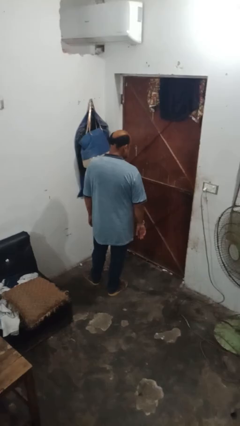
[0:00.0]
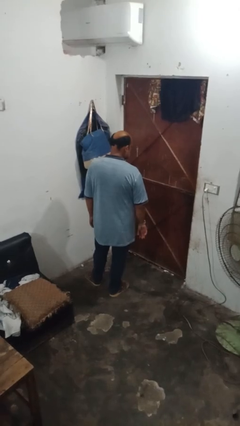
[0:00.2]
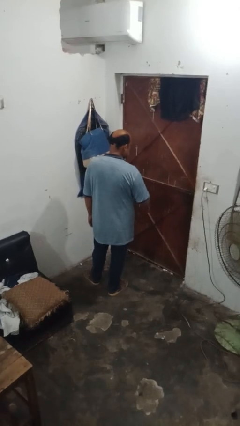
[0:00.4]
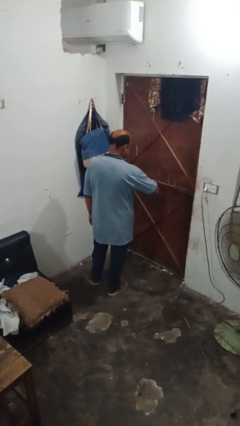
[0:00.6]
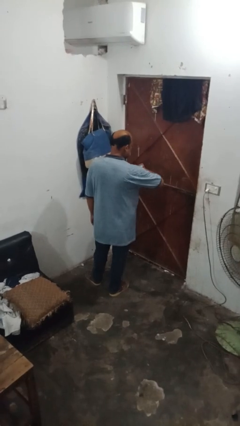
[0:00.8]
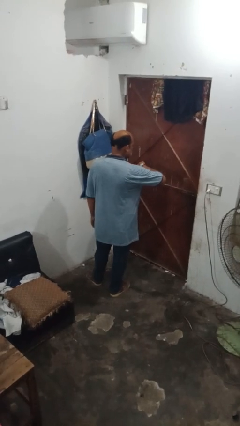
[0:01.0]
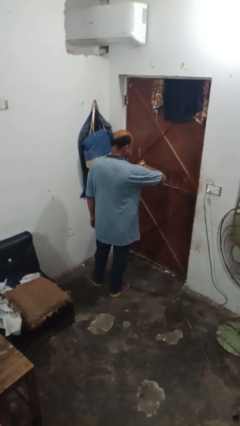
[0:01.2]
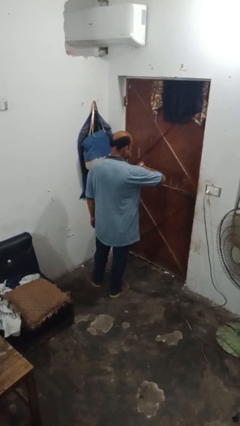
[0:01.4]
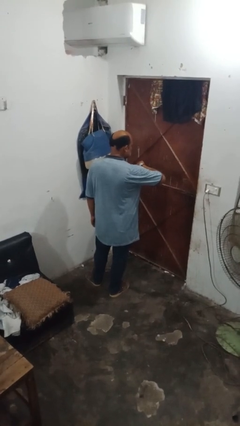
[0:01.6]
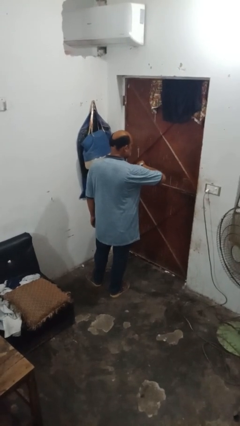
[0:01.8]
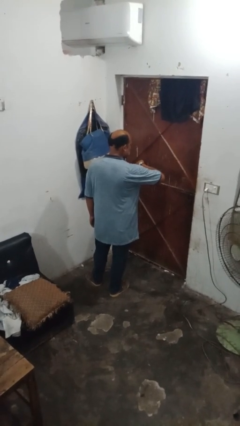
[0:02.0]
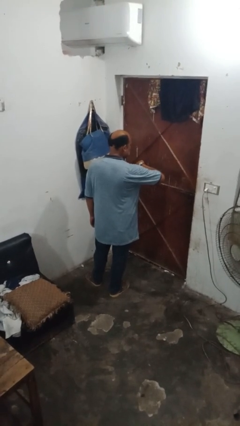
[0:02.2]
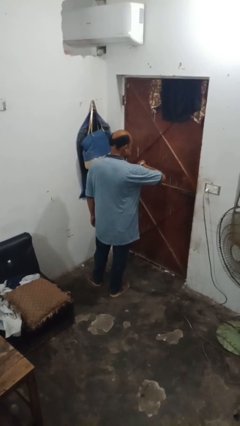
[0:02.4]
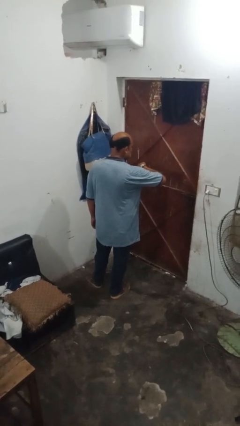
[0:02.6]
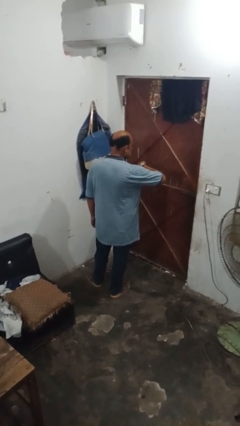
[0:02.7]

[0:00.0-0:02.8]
person looks at wristwatch

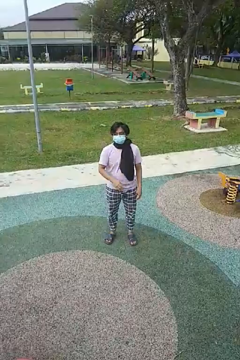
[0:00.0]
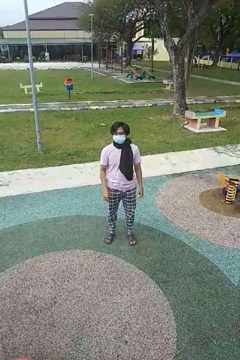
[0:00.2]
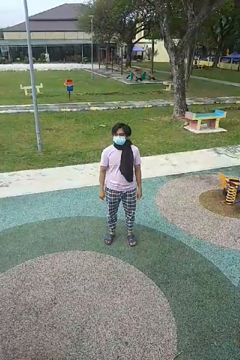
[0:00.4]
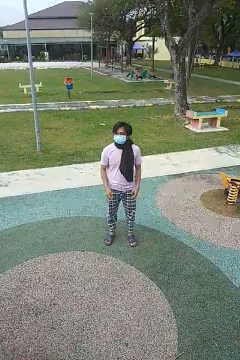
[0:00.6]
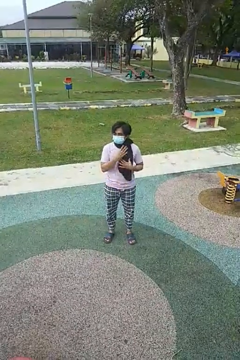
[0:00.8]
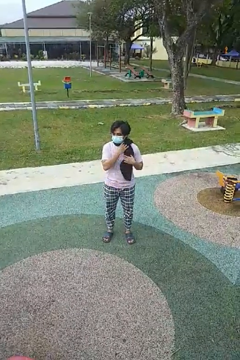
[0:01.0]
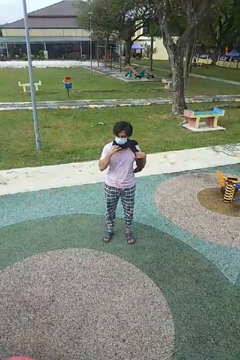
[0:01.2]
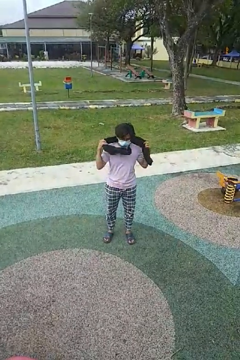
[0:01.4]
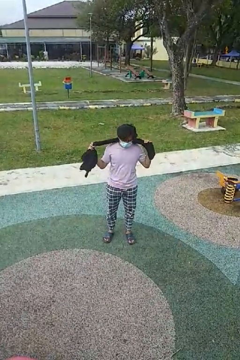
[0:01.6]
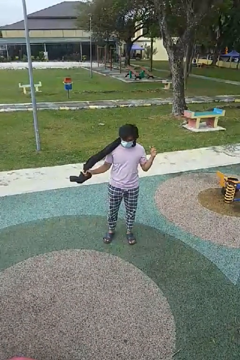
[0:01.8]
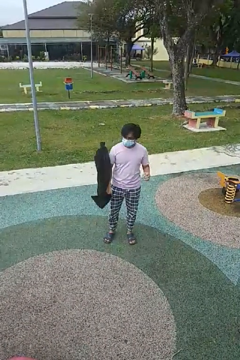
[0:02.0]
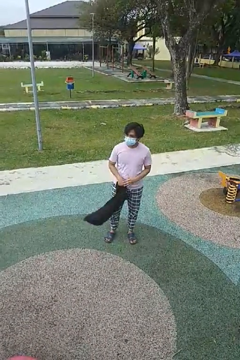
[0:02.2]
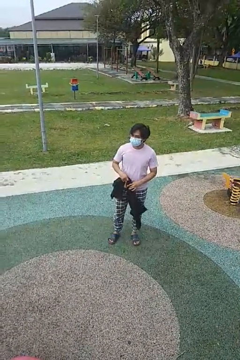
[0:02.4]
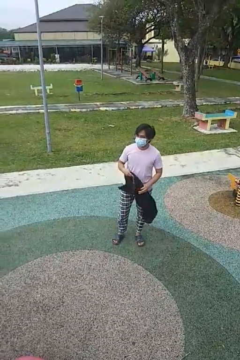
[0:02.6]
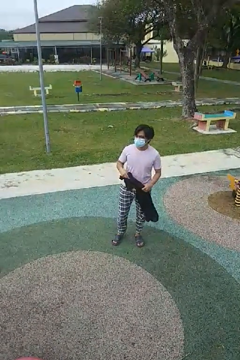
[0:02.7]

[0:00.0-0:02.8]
person takes off scarf

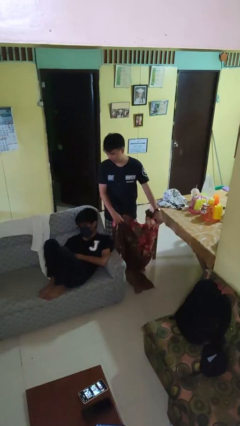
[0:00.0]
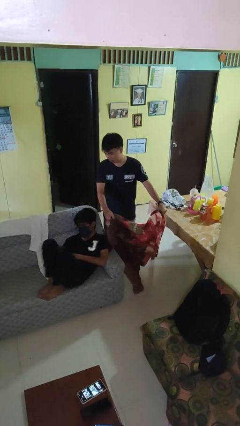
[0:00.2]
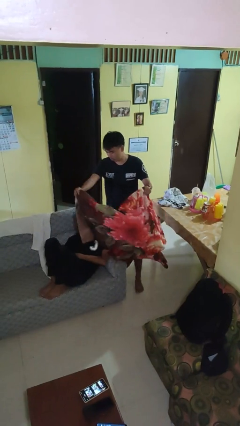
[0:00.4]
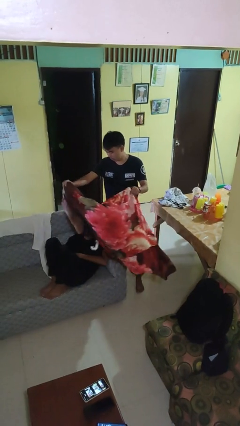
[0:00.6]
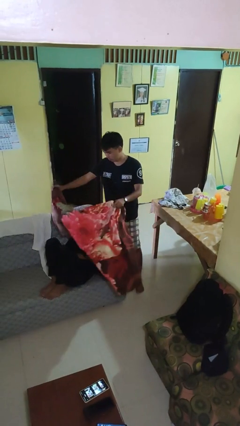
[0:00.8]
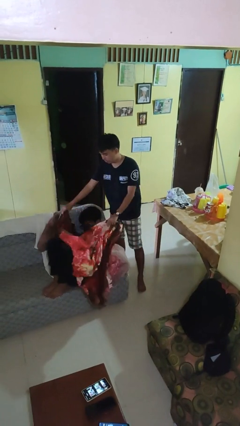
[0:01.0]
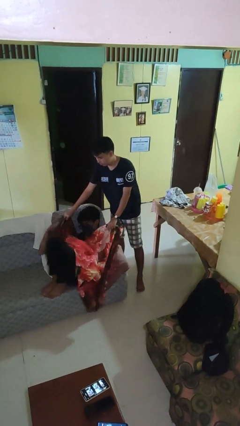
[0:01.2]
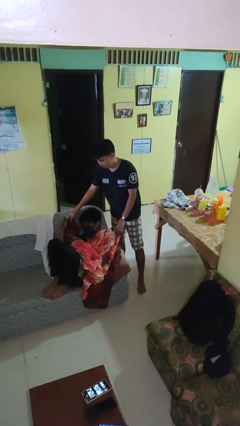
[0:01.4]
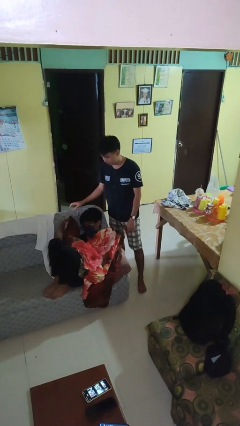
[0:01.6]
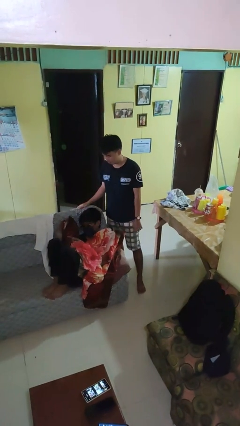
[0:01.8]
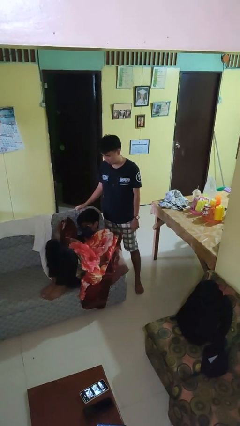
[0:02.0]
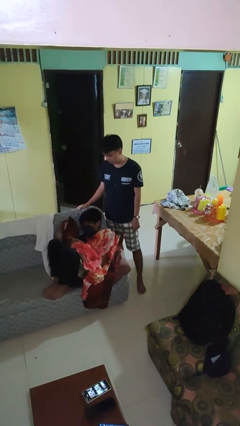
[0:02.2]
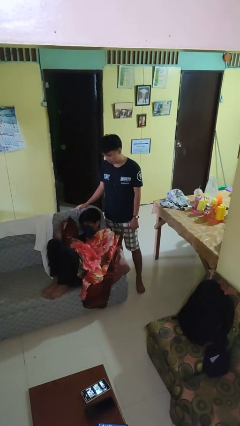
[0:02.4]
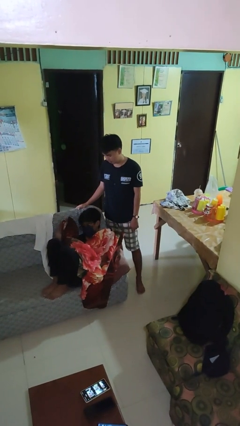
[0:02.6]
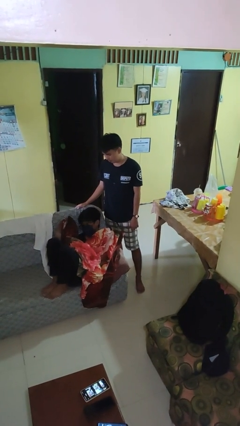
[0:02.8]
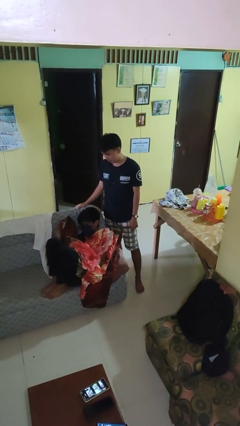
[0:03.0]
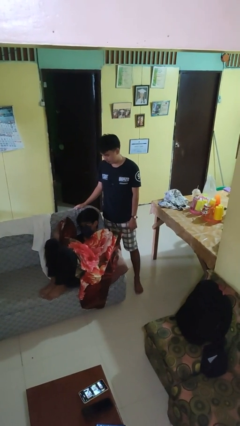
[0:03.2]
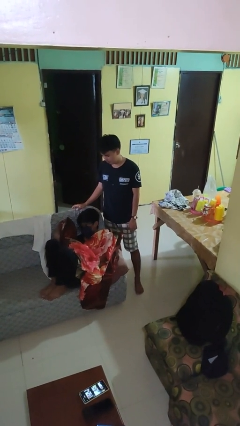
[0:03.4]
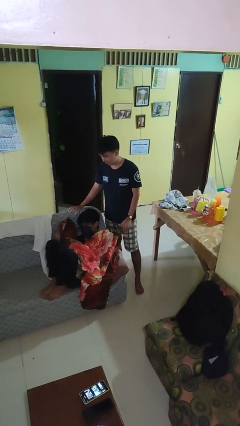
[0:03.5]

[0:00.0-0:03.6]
person covers friend with blanket

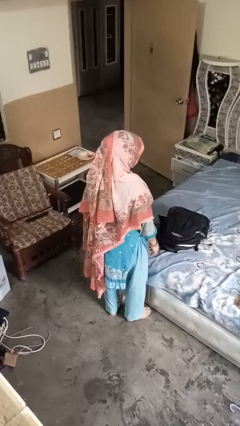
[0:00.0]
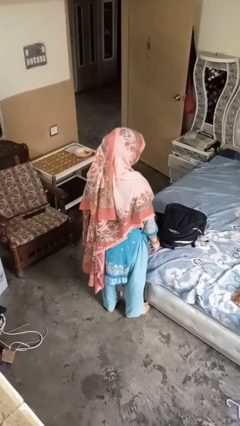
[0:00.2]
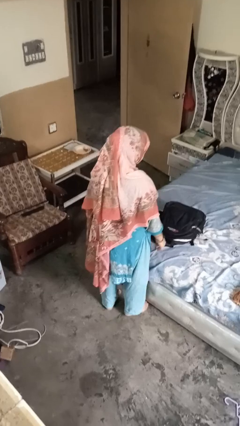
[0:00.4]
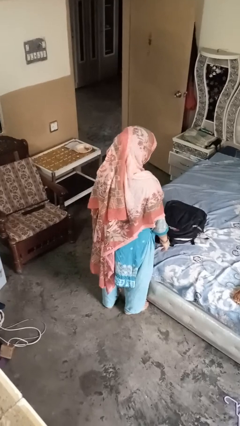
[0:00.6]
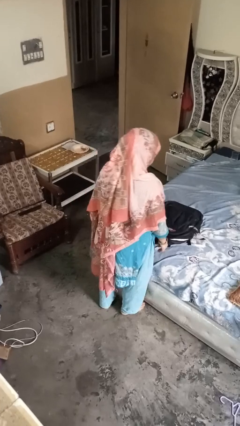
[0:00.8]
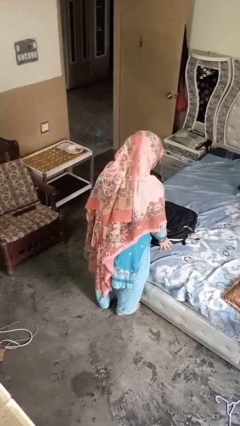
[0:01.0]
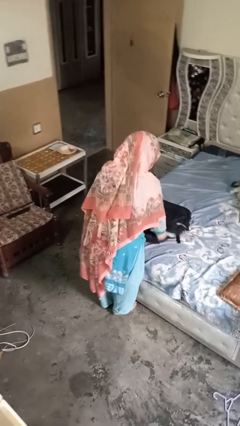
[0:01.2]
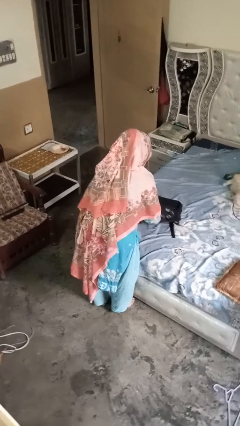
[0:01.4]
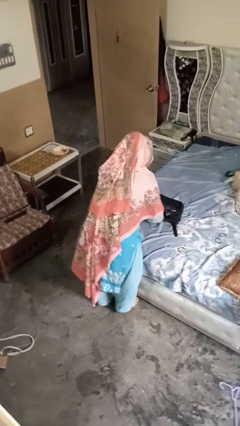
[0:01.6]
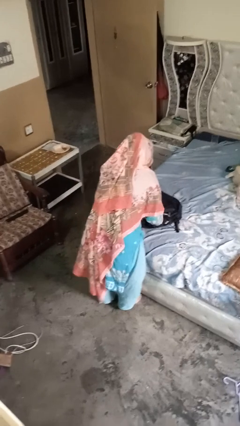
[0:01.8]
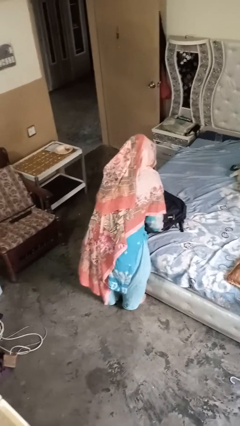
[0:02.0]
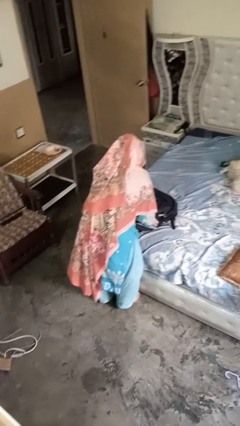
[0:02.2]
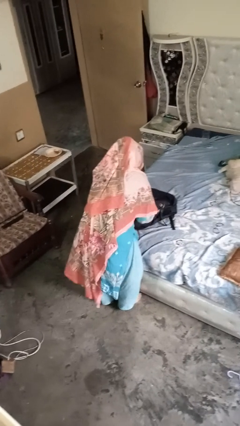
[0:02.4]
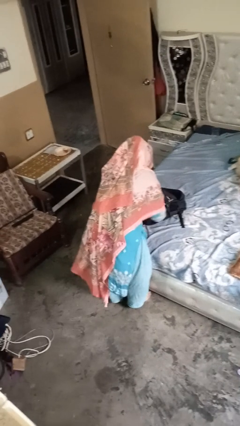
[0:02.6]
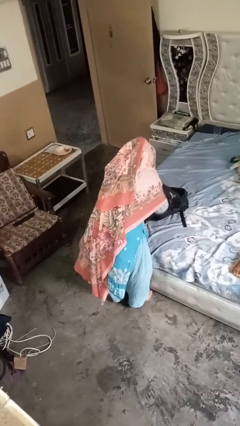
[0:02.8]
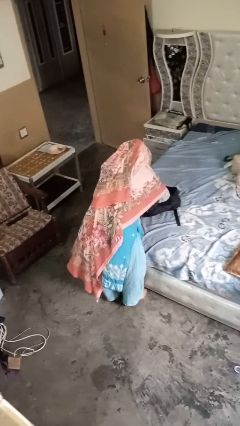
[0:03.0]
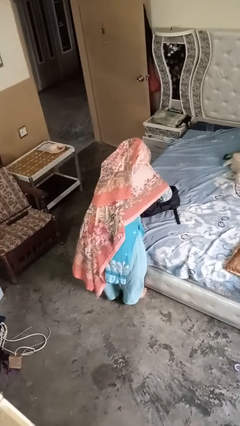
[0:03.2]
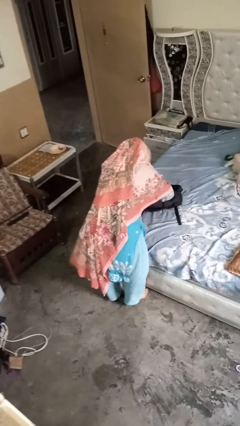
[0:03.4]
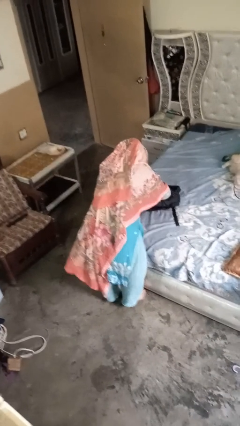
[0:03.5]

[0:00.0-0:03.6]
person searches in bag

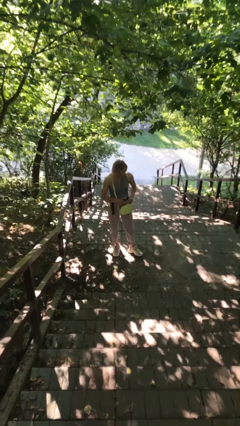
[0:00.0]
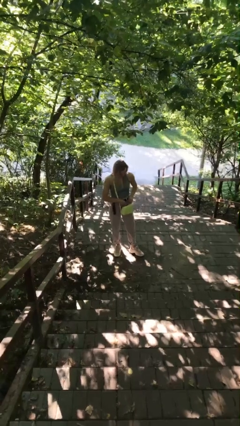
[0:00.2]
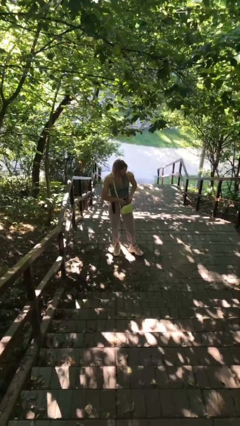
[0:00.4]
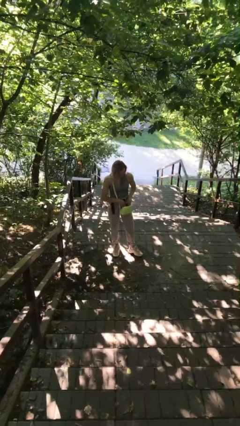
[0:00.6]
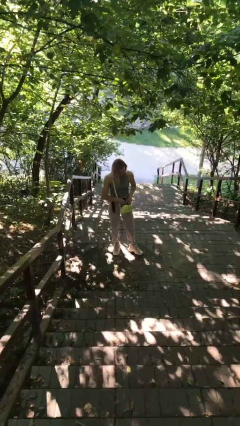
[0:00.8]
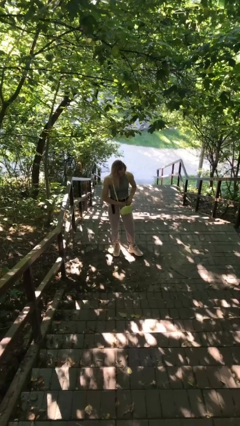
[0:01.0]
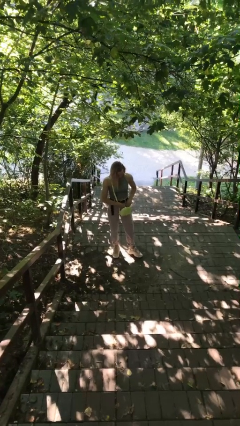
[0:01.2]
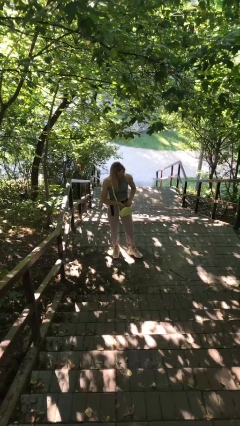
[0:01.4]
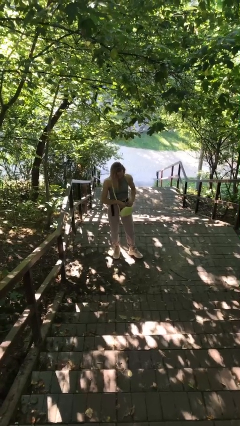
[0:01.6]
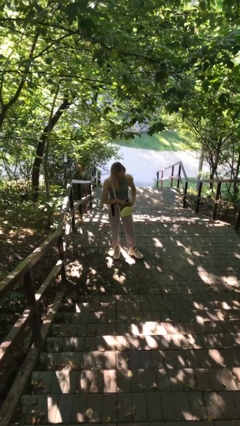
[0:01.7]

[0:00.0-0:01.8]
person searches in purse

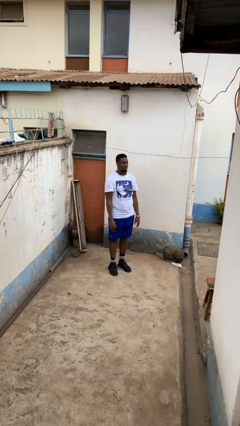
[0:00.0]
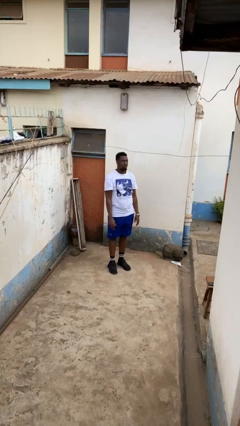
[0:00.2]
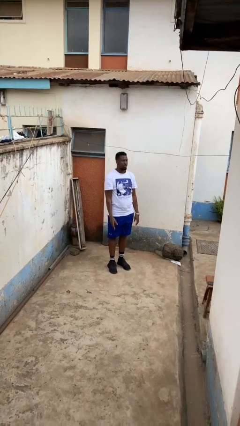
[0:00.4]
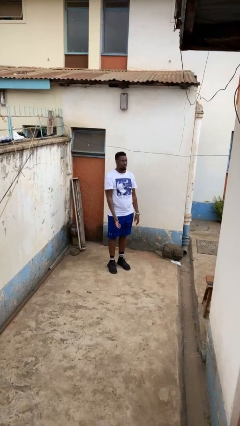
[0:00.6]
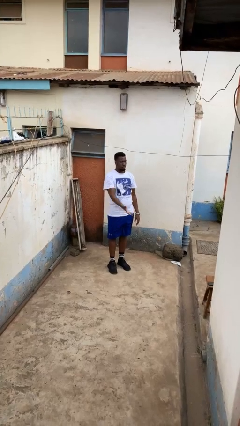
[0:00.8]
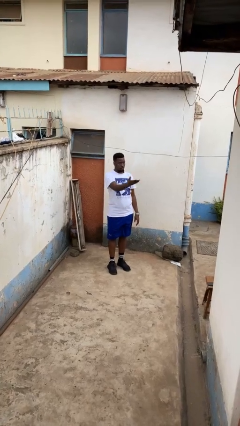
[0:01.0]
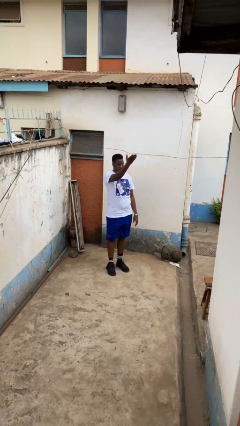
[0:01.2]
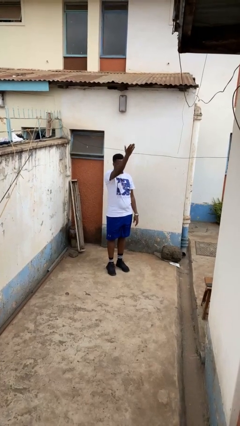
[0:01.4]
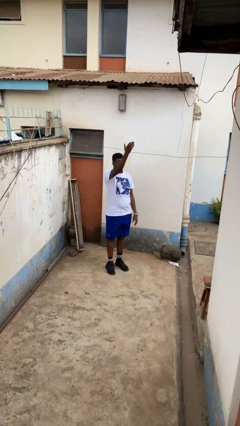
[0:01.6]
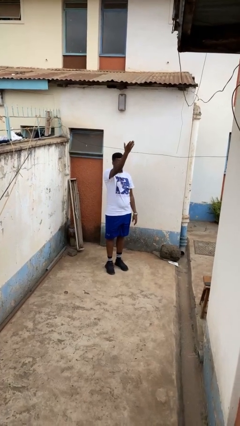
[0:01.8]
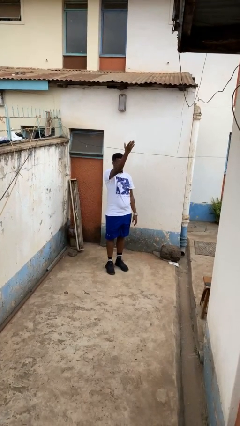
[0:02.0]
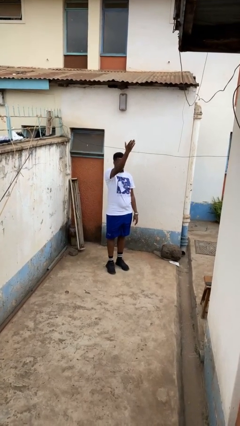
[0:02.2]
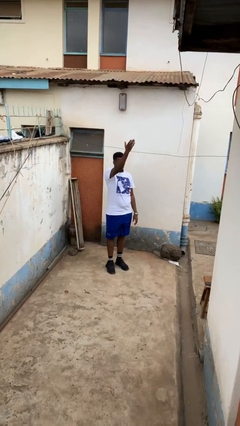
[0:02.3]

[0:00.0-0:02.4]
person gestures swipe up

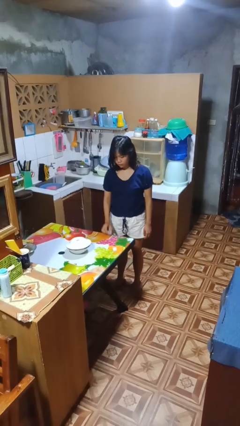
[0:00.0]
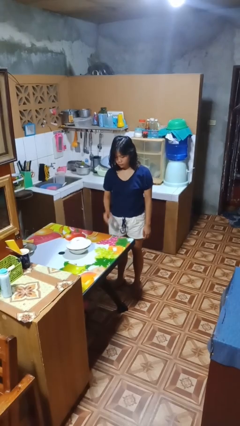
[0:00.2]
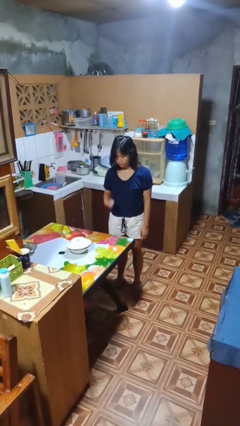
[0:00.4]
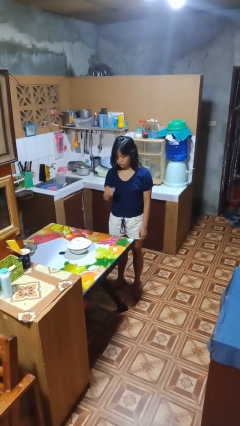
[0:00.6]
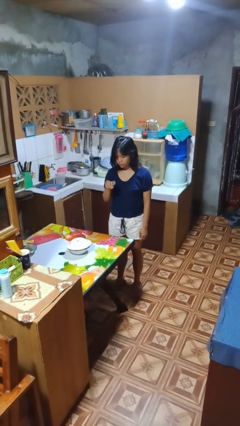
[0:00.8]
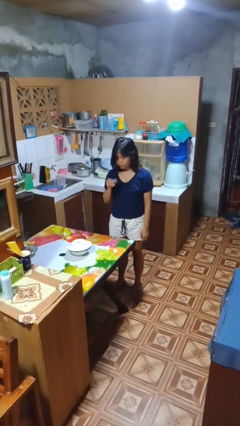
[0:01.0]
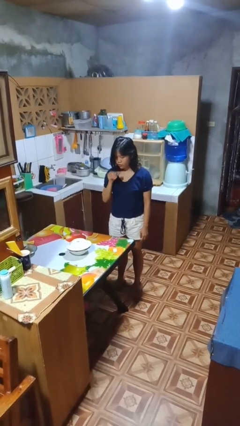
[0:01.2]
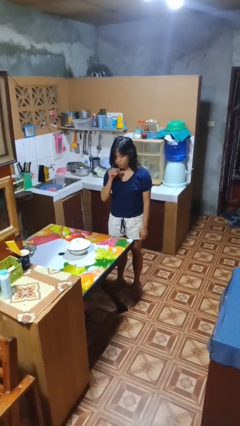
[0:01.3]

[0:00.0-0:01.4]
person picks up object from table
